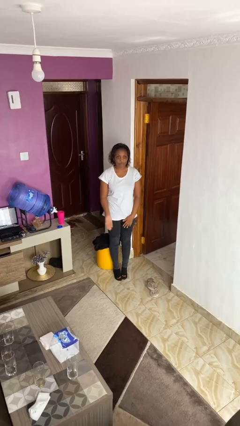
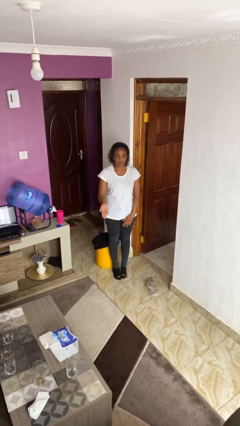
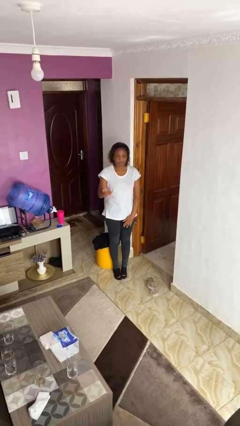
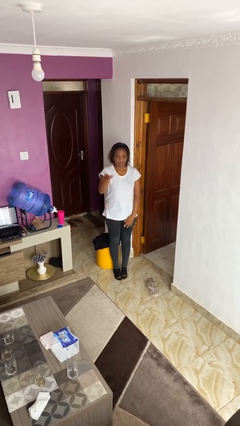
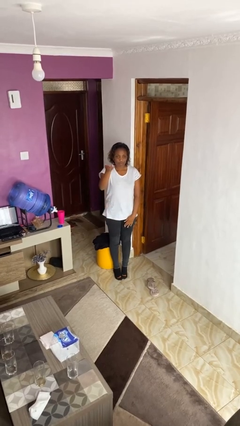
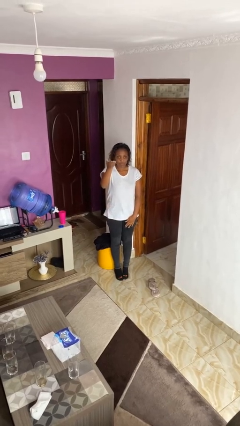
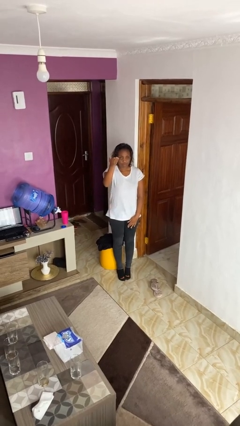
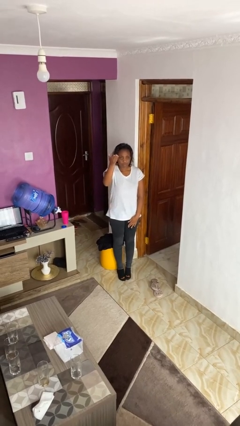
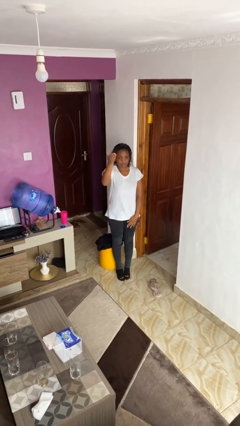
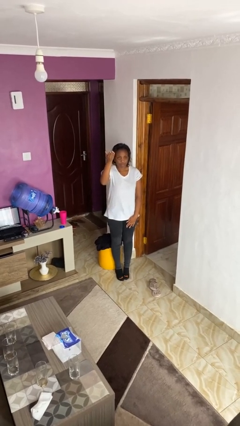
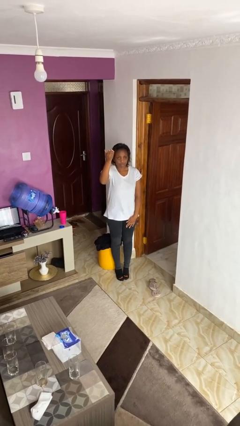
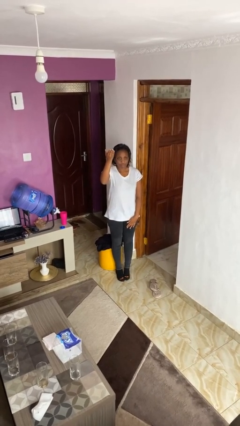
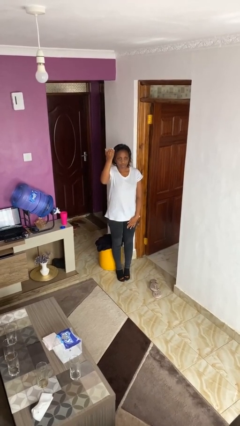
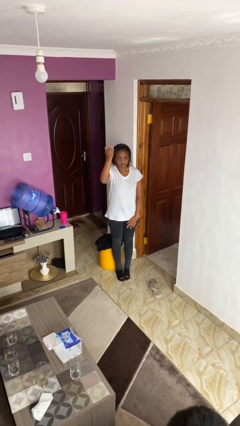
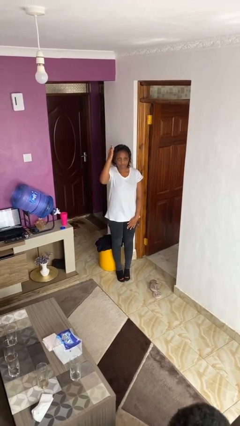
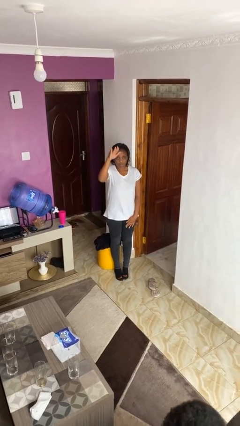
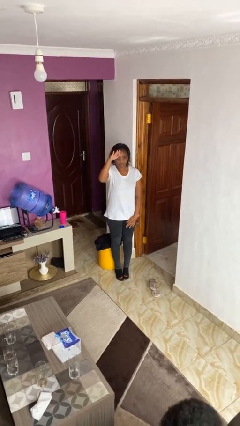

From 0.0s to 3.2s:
person gestures swipe up

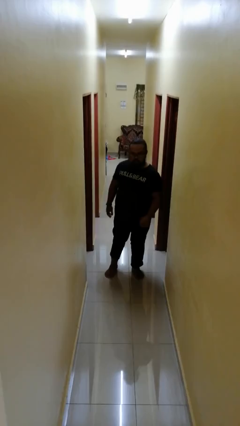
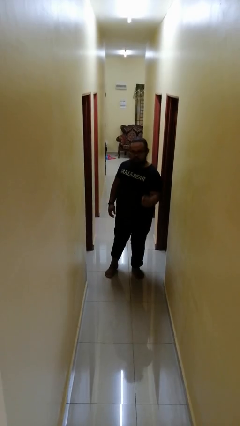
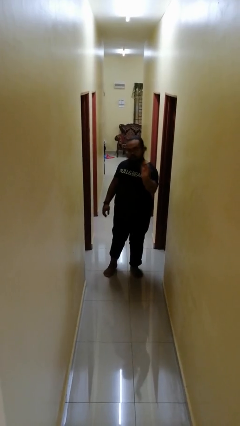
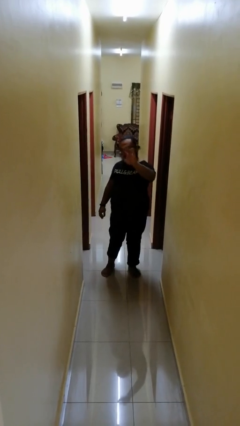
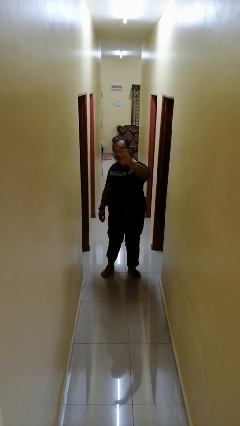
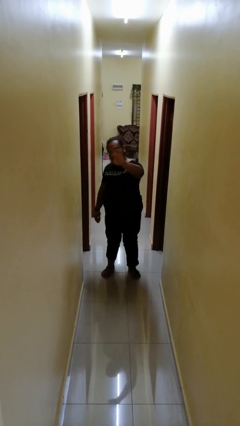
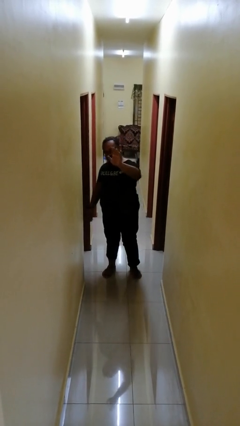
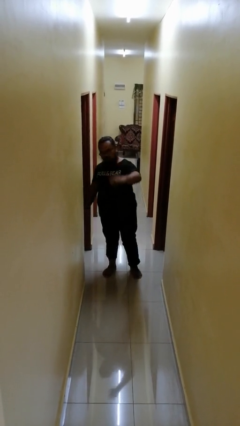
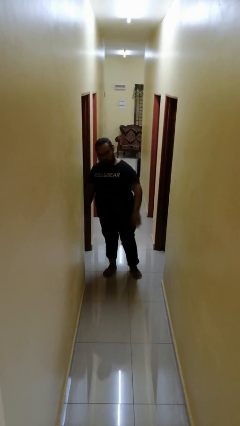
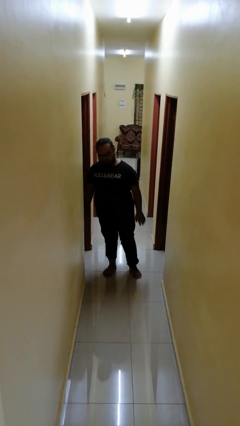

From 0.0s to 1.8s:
person waves at person

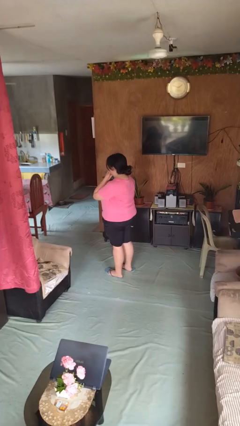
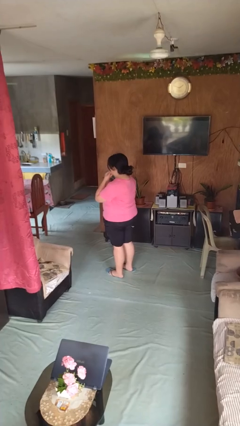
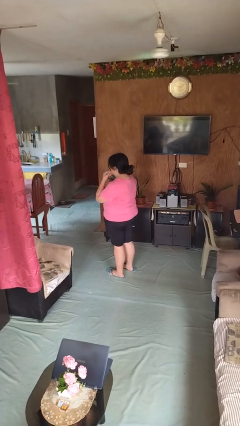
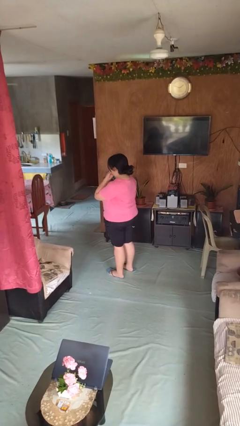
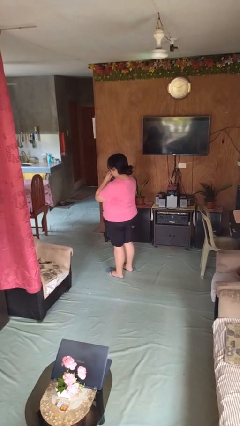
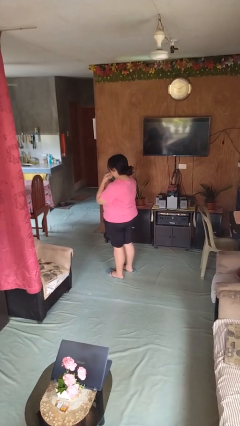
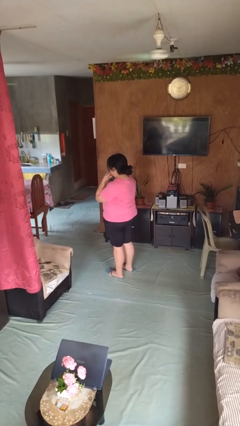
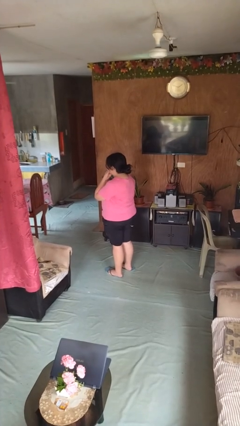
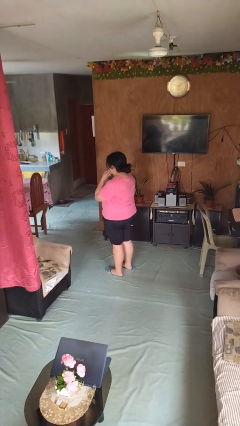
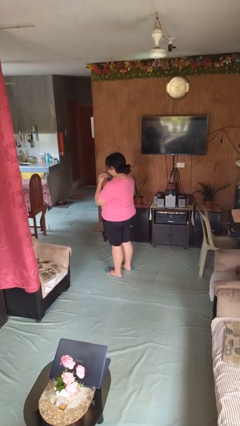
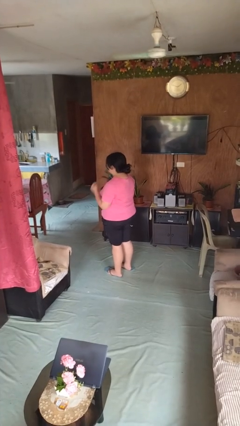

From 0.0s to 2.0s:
person strokes chin

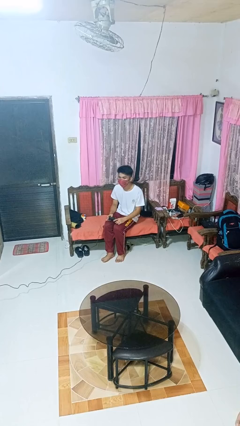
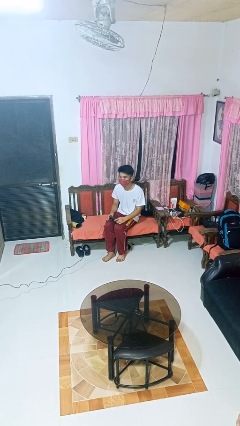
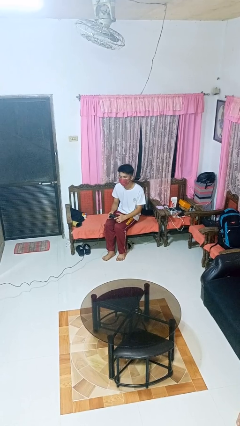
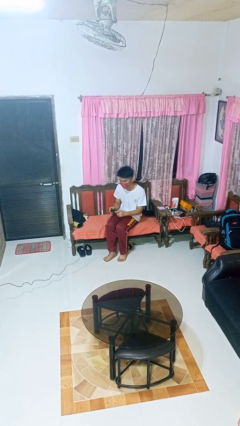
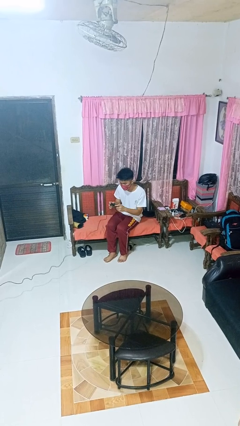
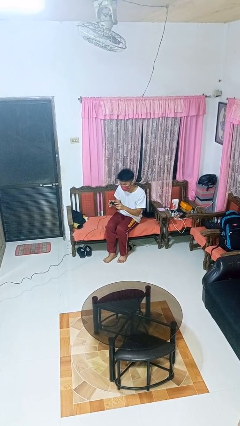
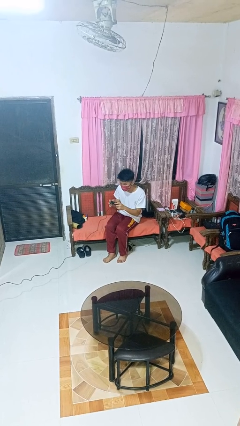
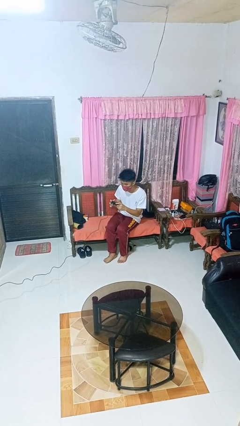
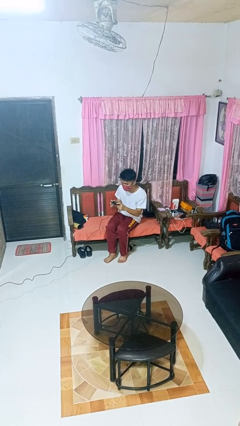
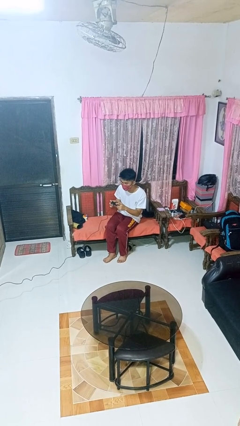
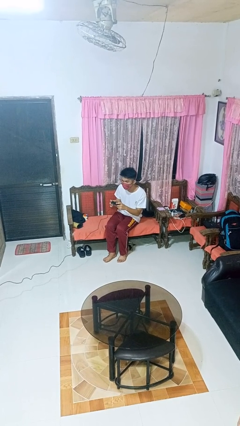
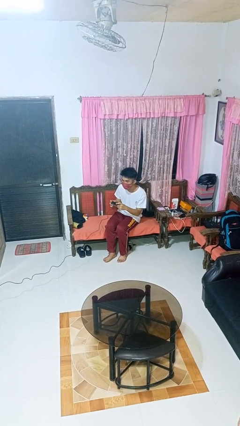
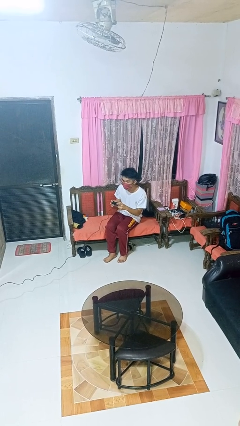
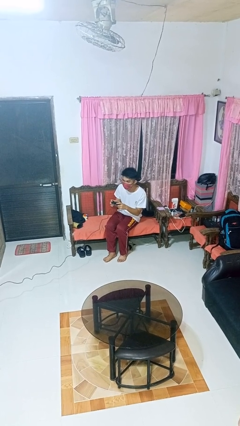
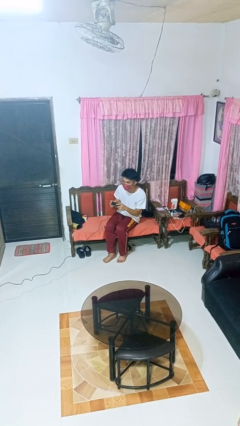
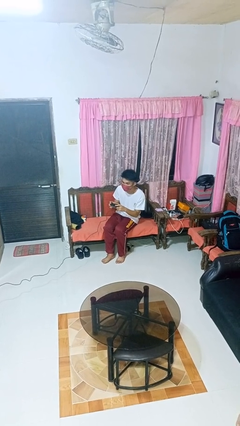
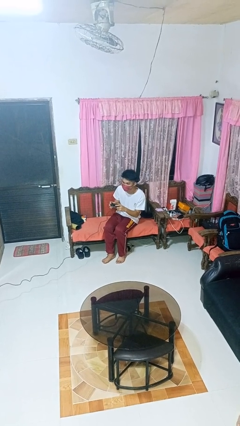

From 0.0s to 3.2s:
person interacts with handheld game

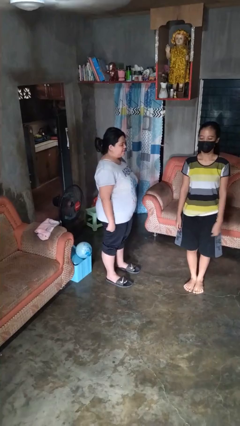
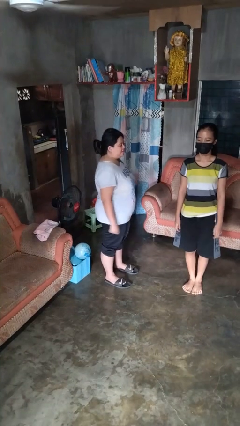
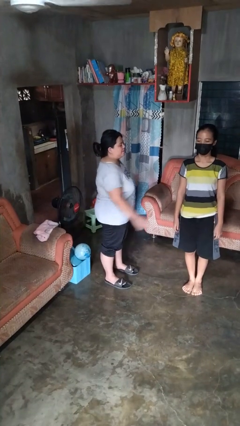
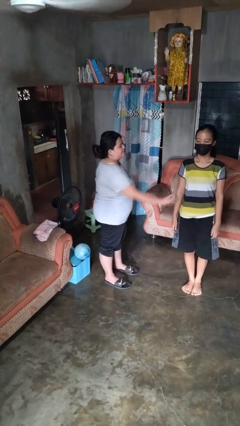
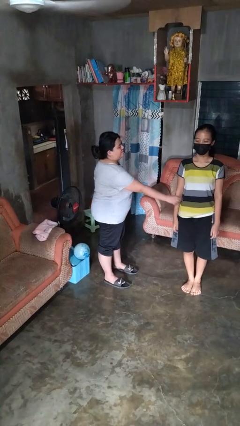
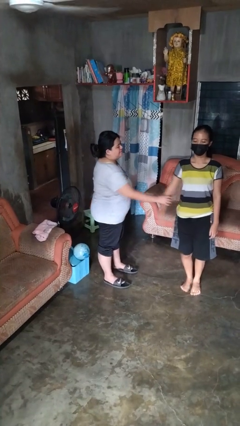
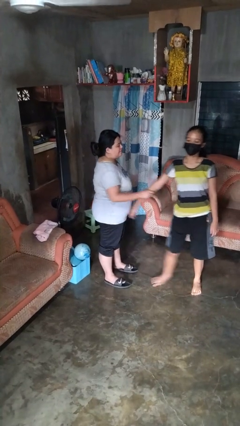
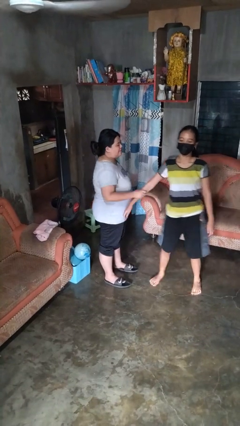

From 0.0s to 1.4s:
person grabs person by forearm

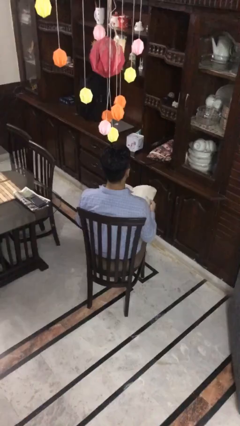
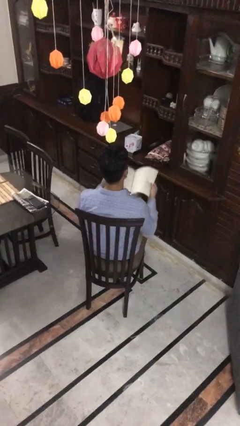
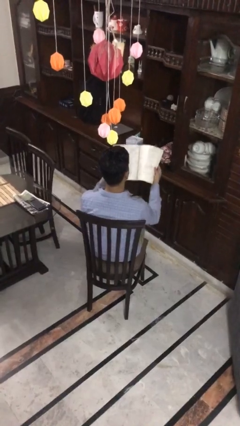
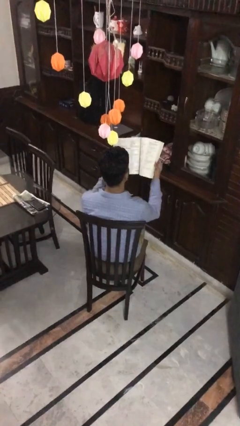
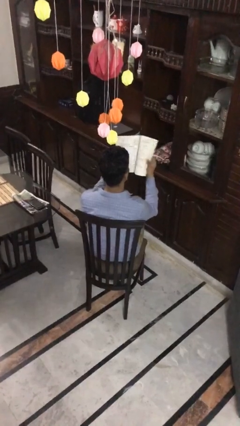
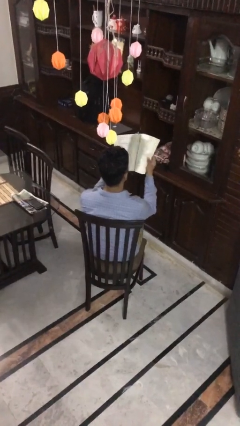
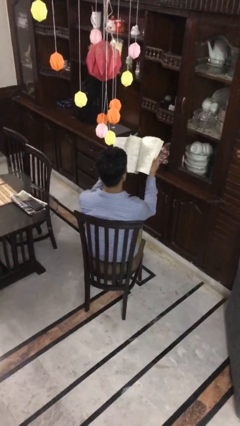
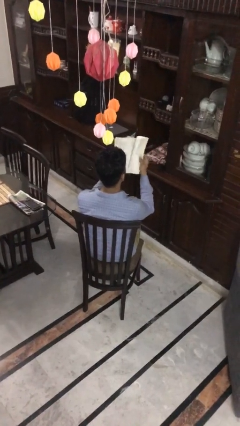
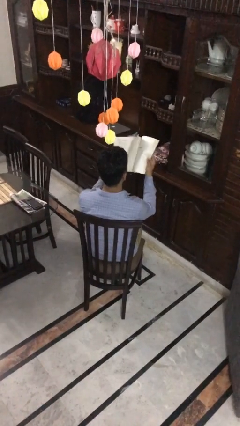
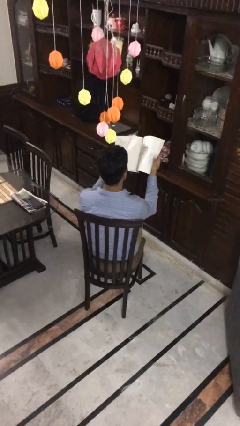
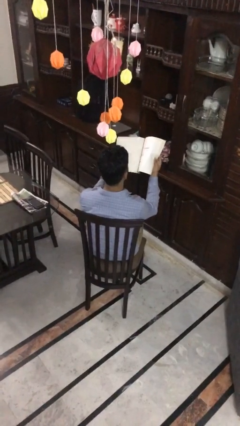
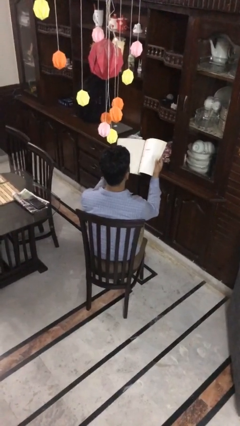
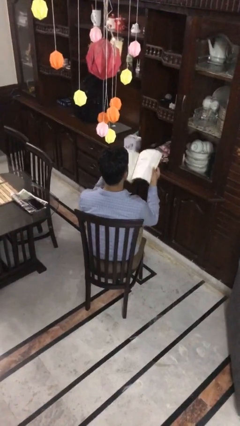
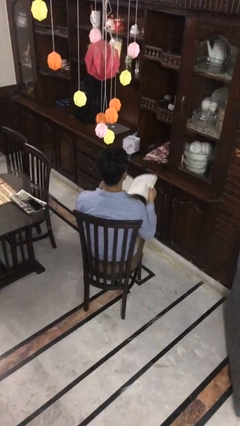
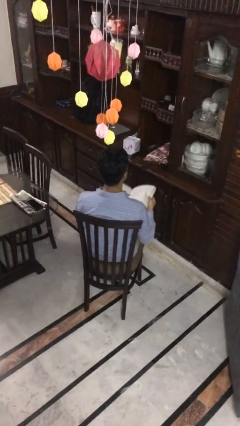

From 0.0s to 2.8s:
person reads magazine

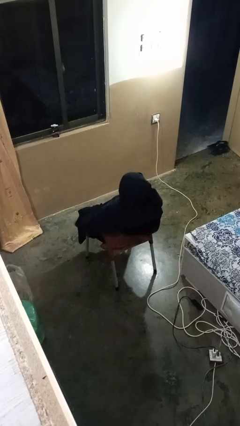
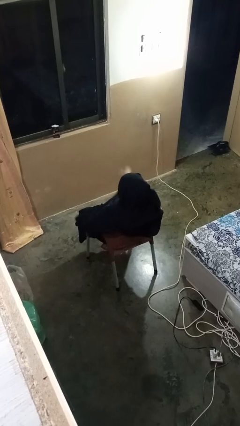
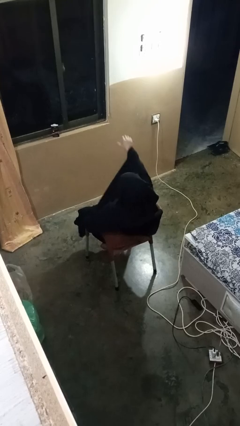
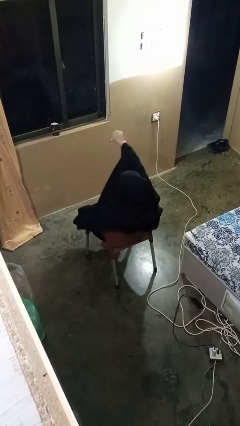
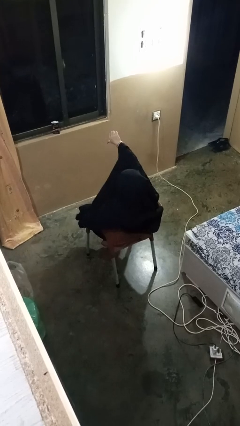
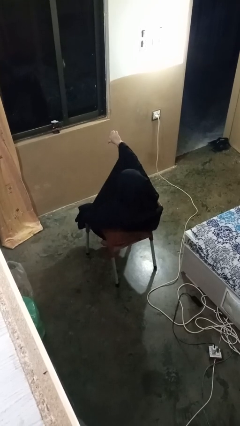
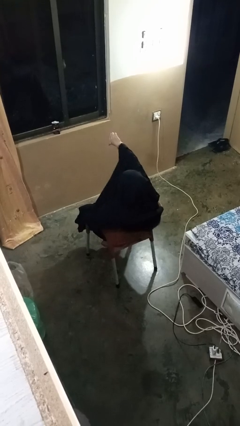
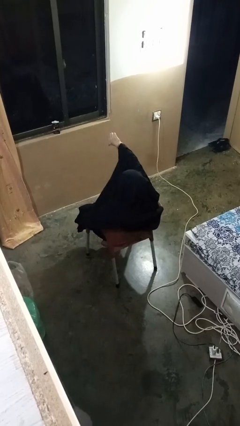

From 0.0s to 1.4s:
person gestures thumbs down

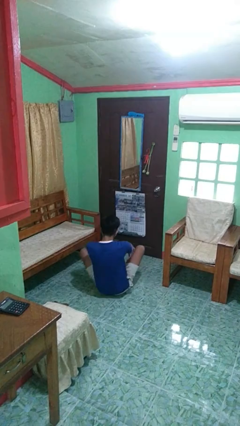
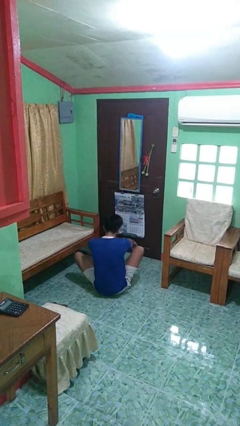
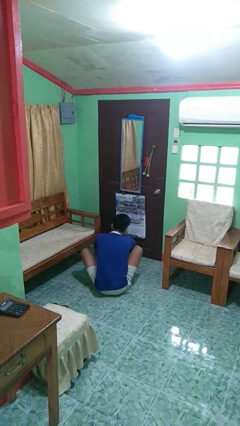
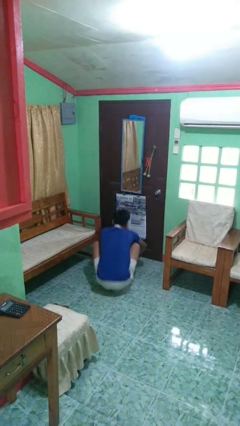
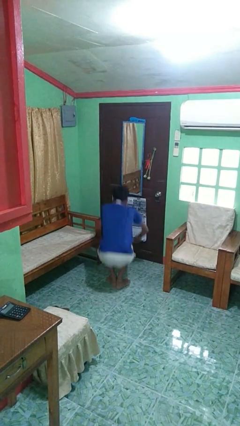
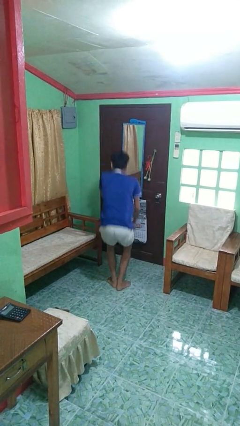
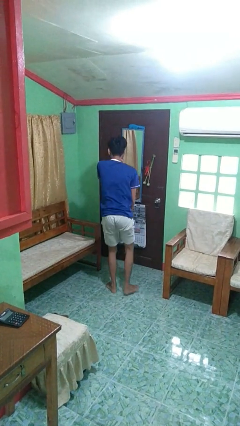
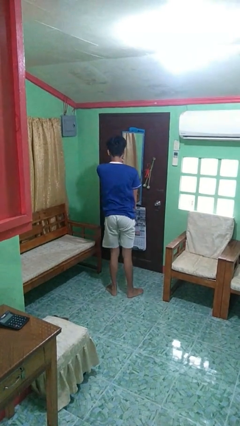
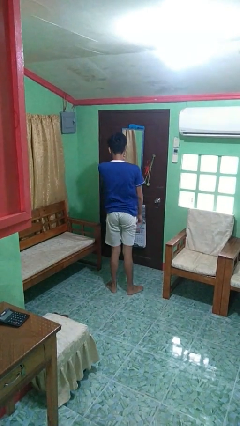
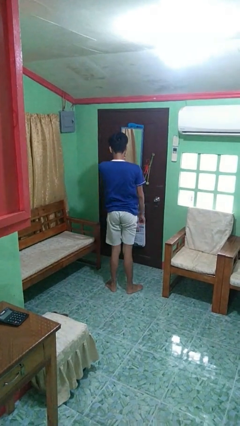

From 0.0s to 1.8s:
person stands up
